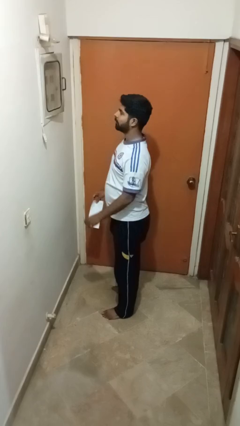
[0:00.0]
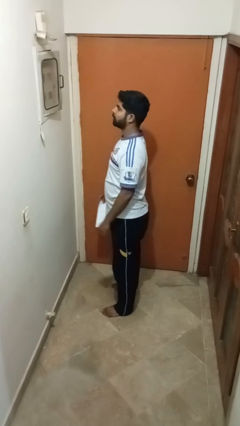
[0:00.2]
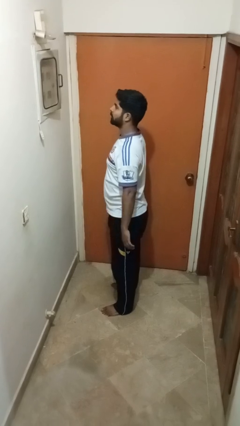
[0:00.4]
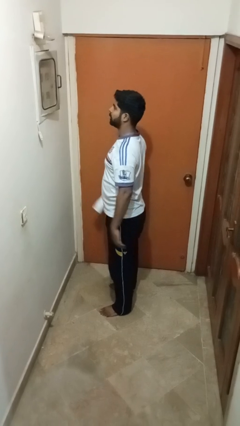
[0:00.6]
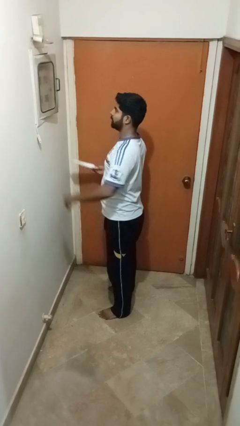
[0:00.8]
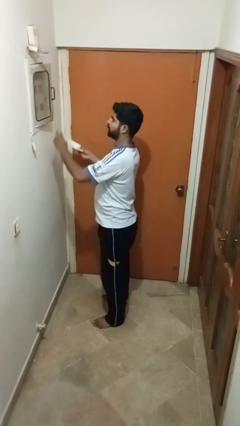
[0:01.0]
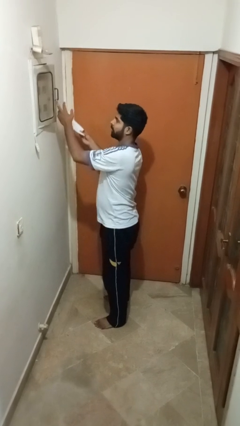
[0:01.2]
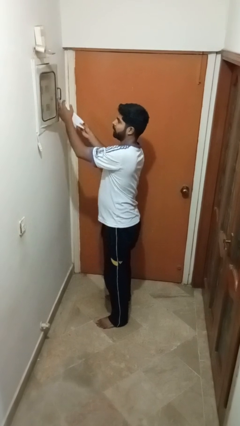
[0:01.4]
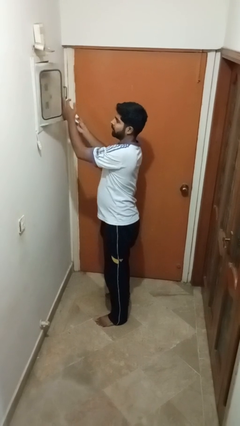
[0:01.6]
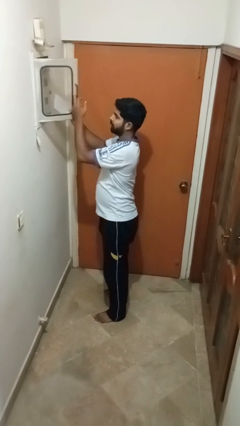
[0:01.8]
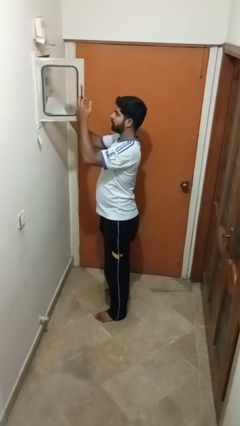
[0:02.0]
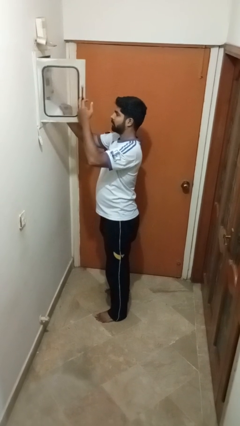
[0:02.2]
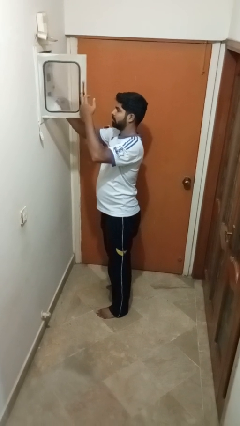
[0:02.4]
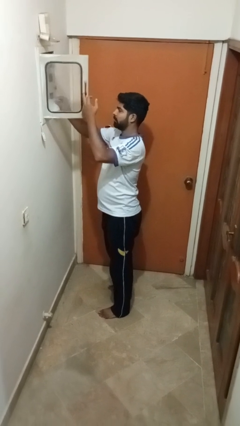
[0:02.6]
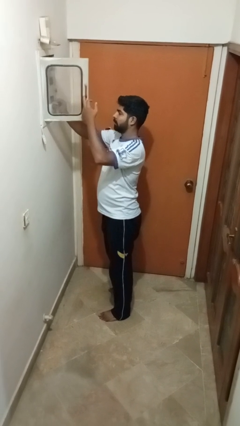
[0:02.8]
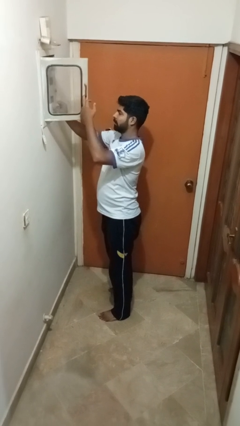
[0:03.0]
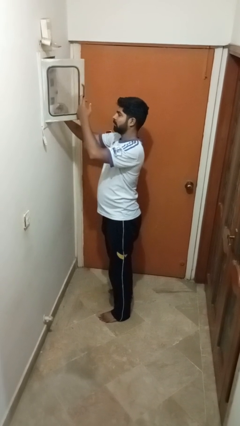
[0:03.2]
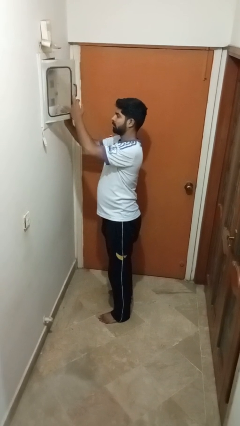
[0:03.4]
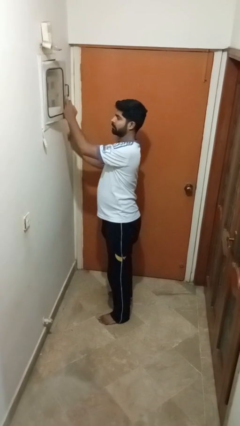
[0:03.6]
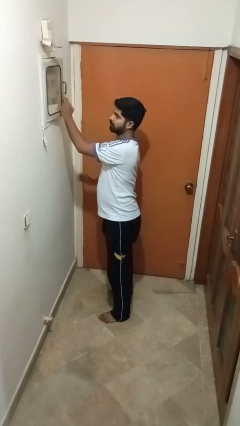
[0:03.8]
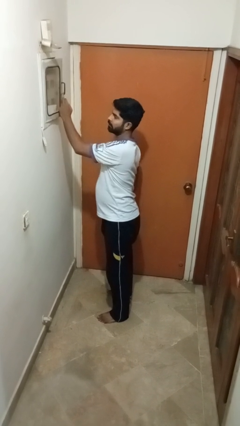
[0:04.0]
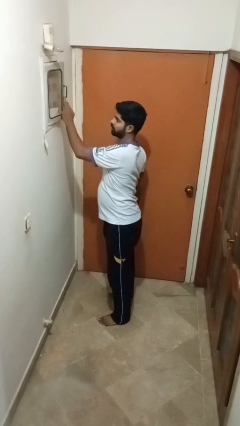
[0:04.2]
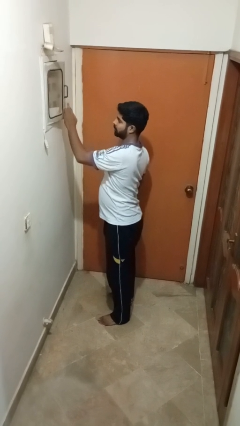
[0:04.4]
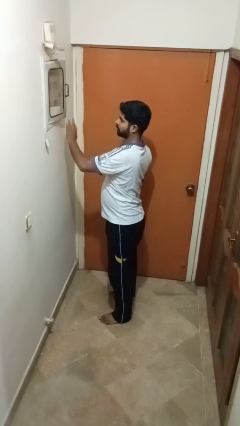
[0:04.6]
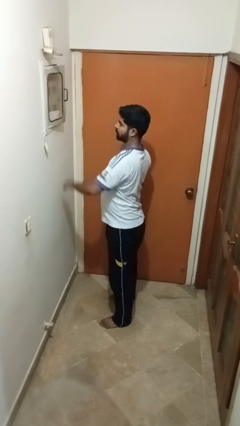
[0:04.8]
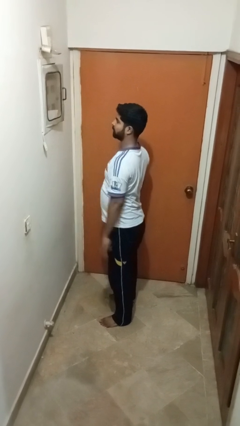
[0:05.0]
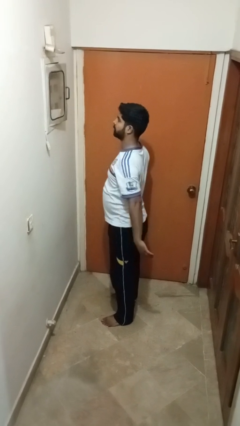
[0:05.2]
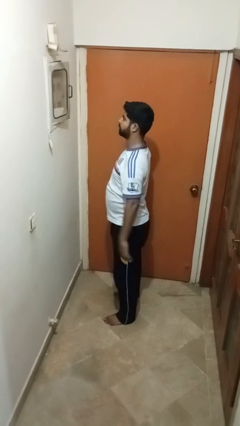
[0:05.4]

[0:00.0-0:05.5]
person puts letters in mailbox

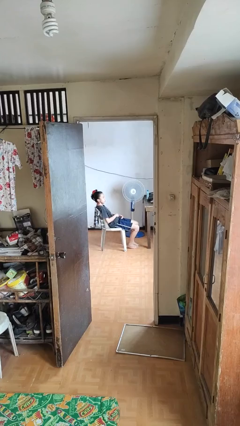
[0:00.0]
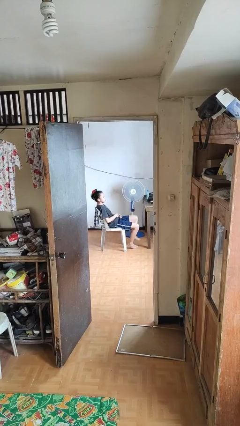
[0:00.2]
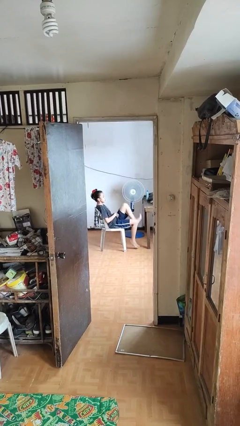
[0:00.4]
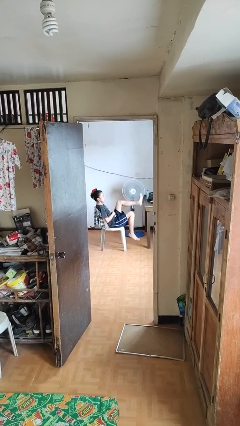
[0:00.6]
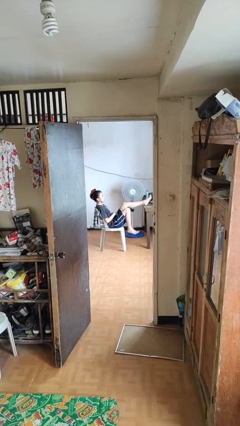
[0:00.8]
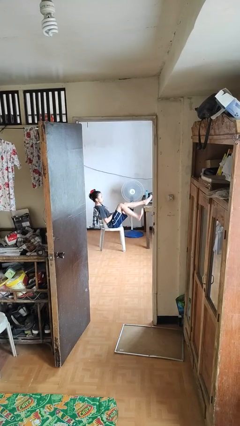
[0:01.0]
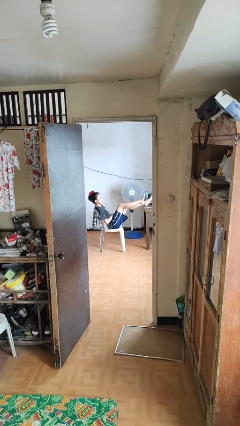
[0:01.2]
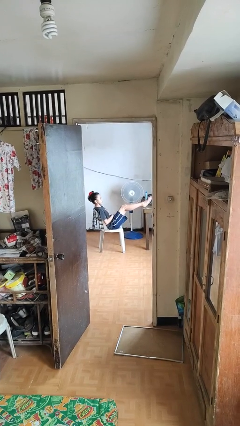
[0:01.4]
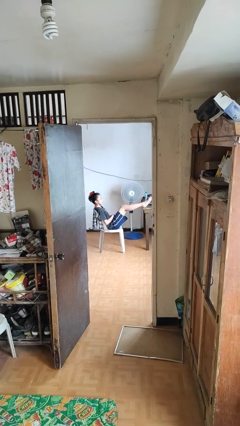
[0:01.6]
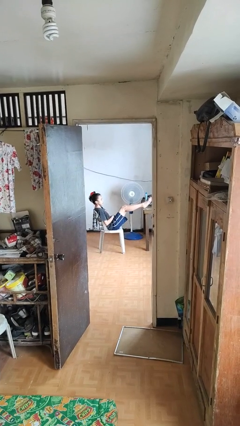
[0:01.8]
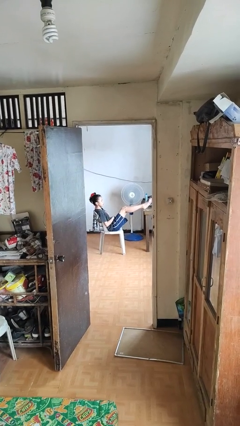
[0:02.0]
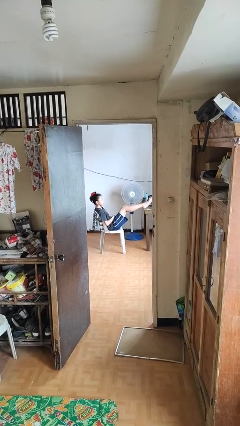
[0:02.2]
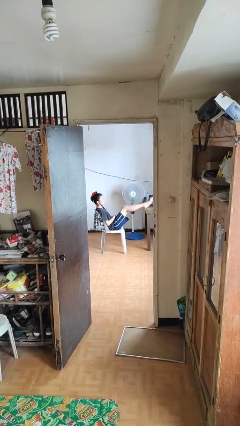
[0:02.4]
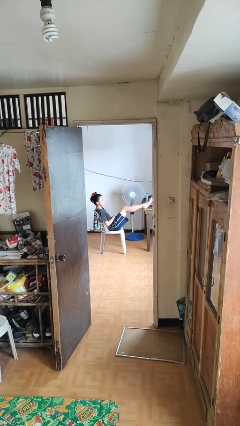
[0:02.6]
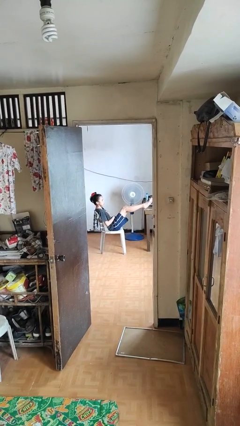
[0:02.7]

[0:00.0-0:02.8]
person puts feet up

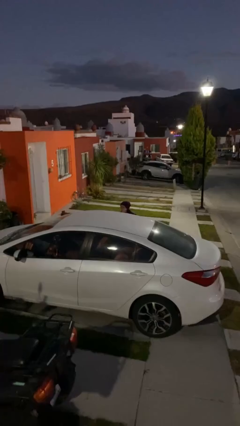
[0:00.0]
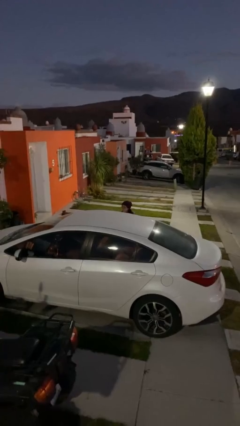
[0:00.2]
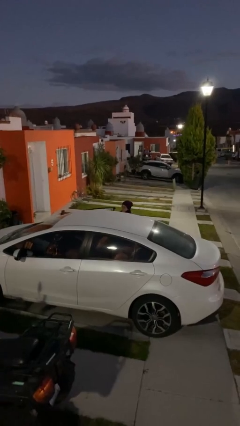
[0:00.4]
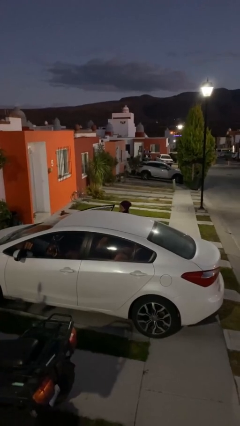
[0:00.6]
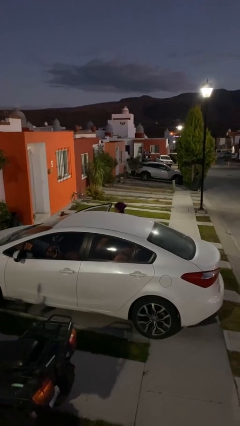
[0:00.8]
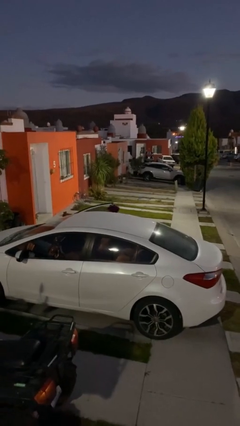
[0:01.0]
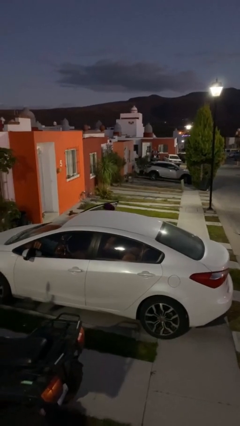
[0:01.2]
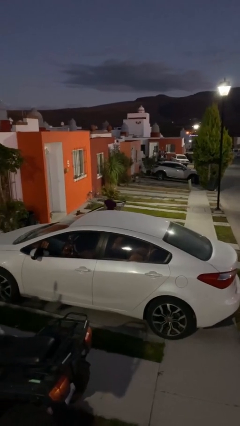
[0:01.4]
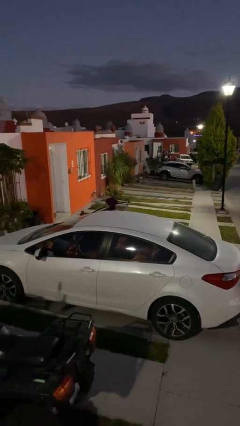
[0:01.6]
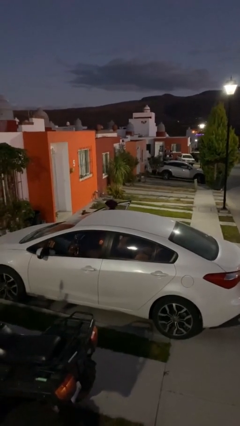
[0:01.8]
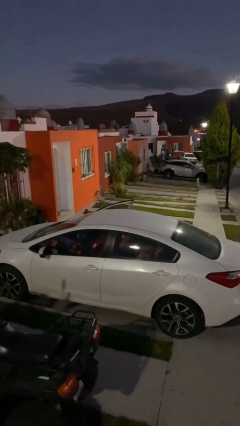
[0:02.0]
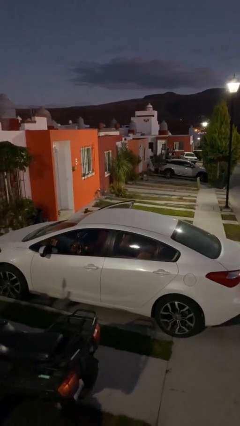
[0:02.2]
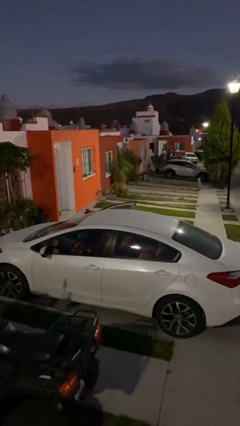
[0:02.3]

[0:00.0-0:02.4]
car picks up person

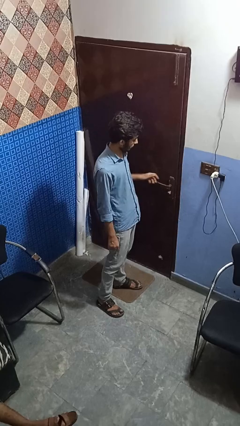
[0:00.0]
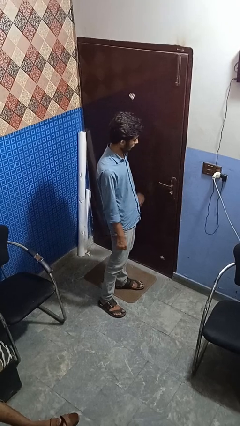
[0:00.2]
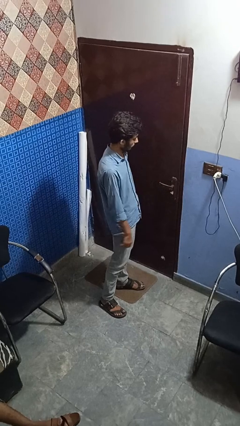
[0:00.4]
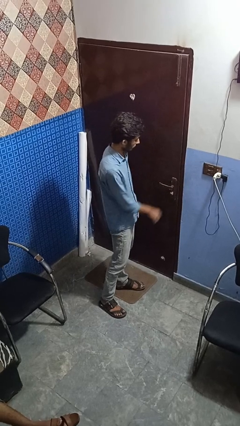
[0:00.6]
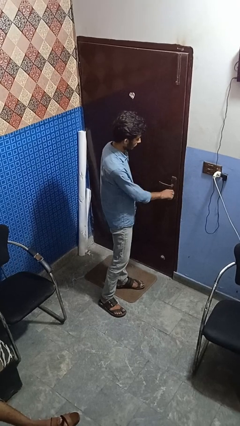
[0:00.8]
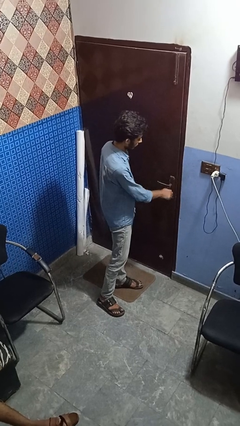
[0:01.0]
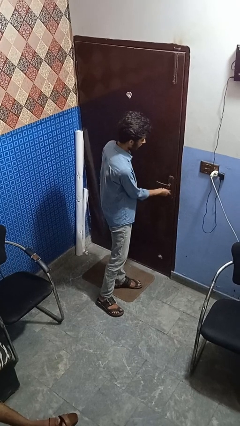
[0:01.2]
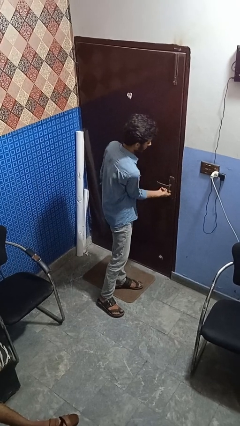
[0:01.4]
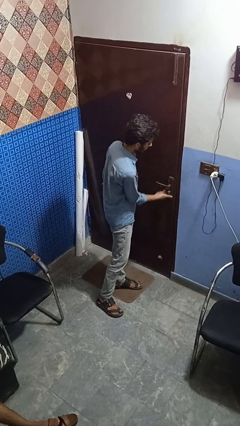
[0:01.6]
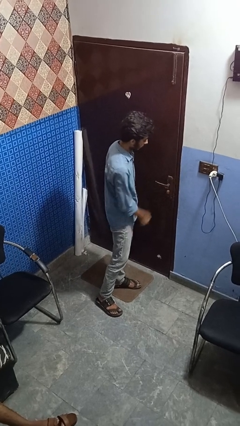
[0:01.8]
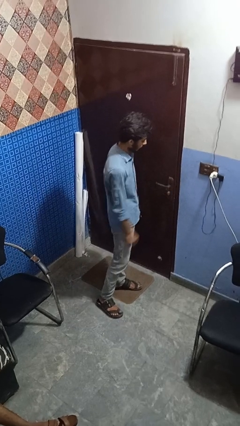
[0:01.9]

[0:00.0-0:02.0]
person locks door with keys

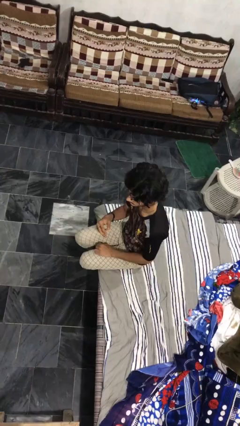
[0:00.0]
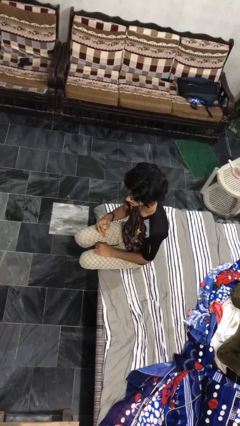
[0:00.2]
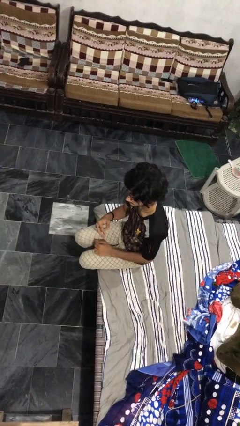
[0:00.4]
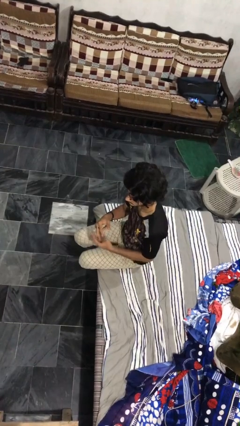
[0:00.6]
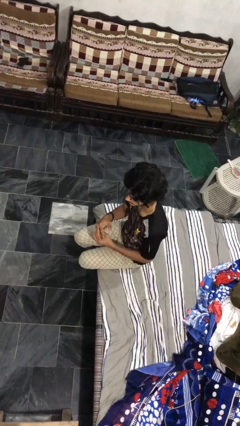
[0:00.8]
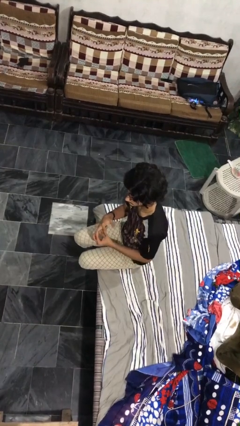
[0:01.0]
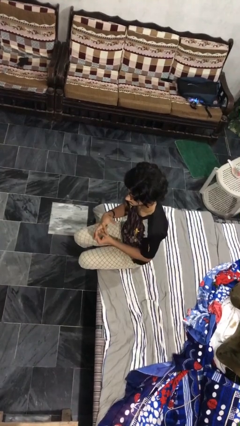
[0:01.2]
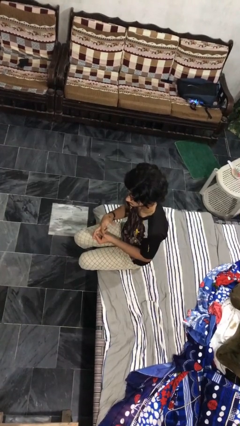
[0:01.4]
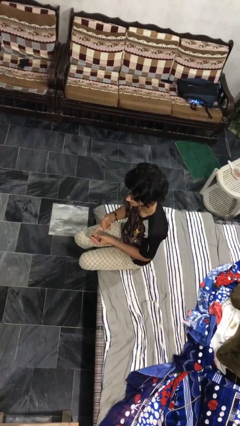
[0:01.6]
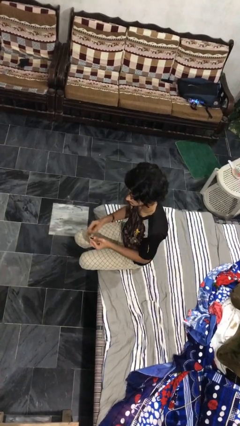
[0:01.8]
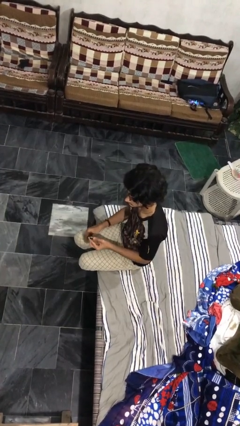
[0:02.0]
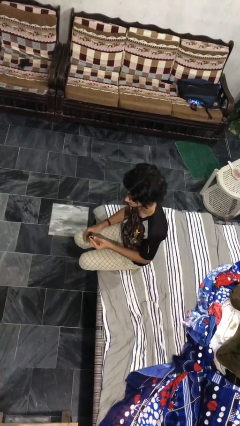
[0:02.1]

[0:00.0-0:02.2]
person takes off ring

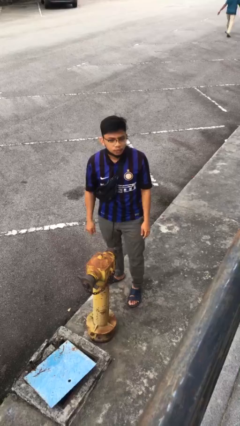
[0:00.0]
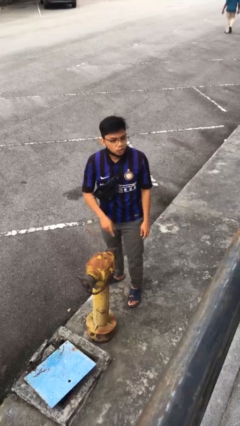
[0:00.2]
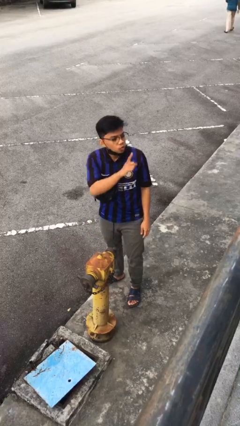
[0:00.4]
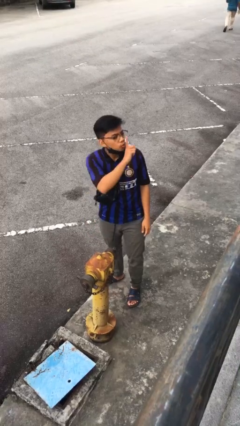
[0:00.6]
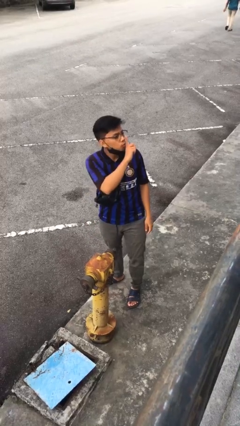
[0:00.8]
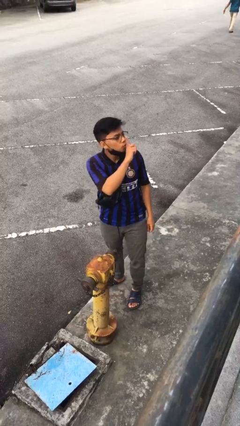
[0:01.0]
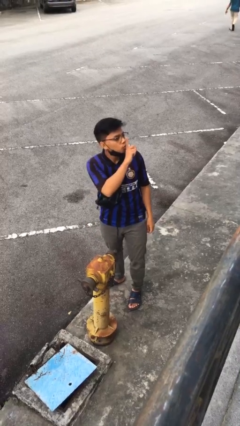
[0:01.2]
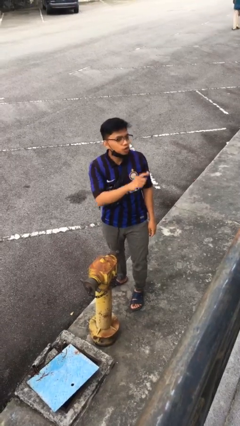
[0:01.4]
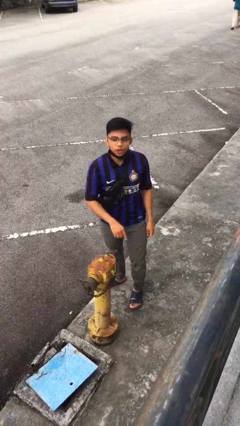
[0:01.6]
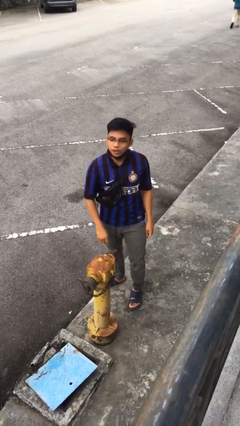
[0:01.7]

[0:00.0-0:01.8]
person gestures be quiet

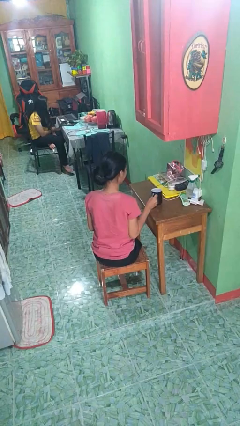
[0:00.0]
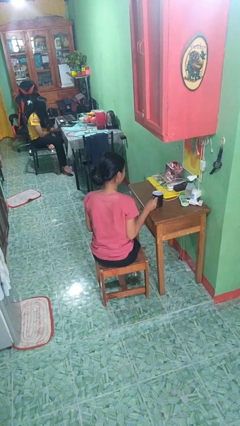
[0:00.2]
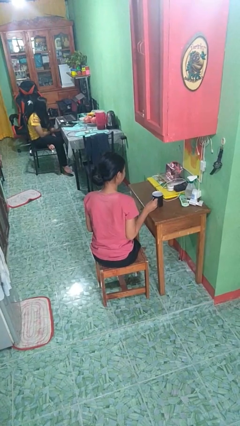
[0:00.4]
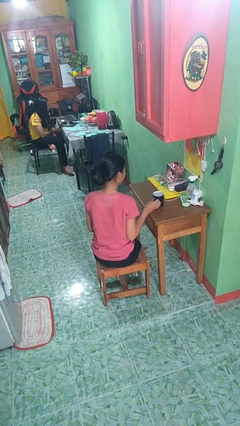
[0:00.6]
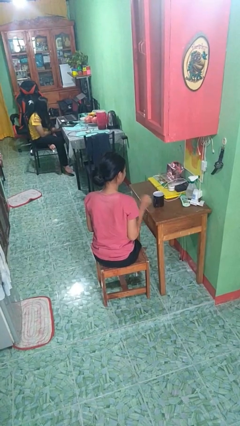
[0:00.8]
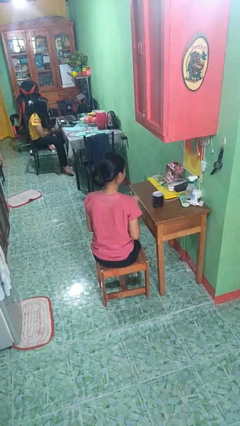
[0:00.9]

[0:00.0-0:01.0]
person puts down object on table
